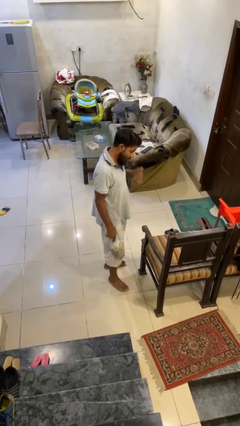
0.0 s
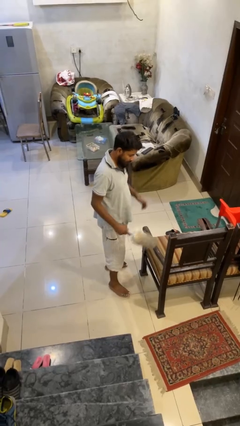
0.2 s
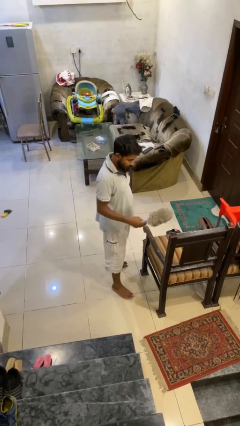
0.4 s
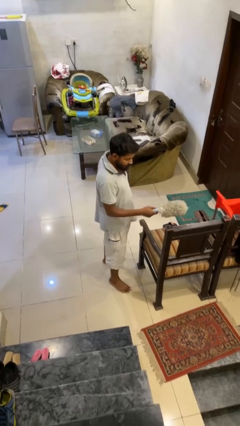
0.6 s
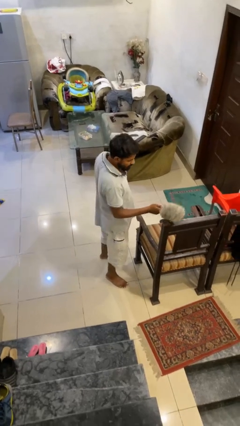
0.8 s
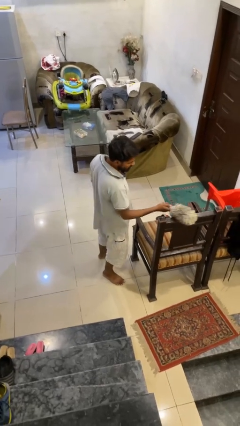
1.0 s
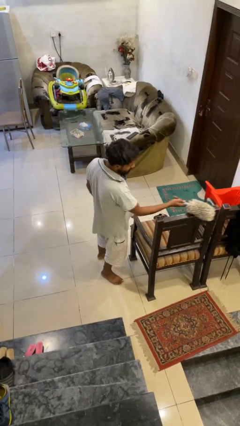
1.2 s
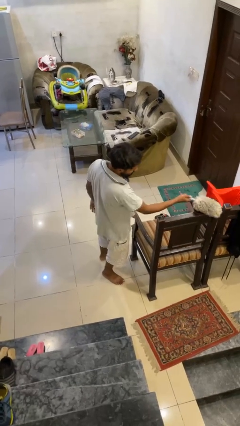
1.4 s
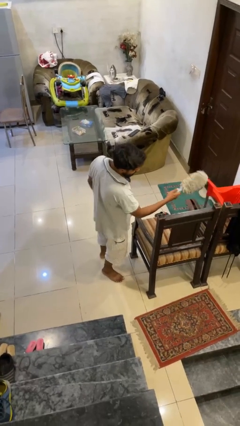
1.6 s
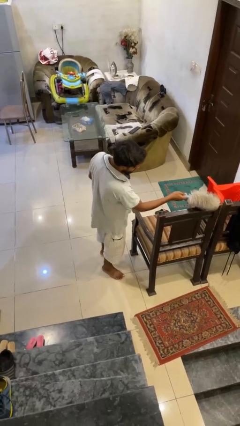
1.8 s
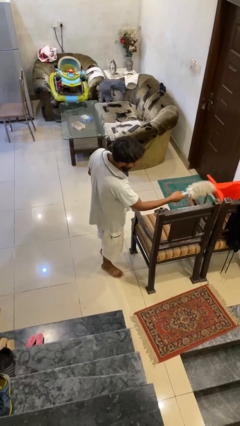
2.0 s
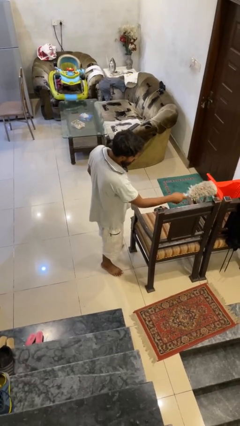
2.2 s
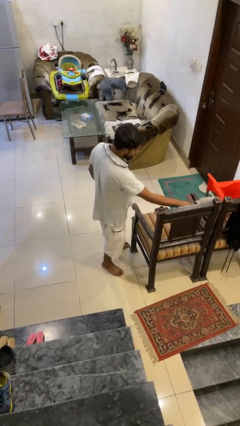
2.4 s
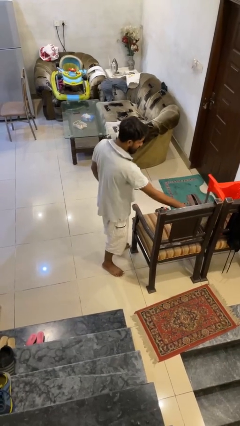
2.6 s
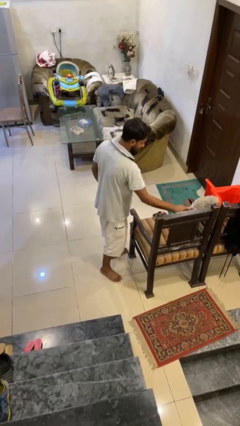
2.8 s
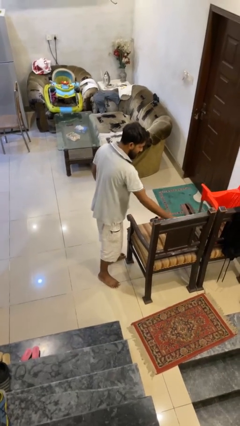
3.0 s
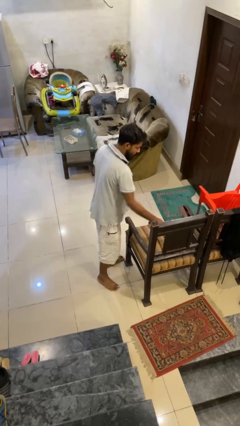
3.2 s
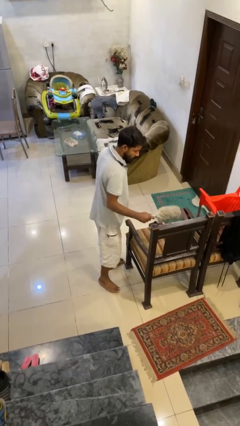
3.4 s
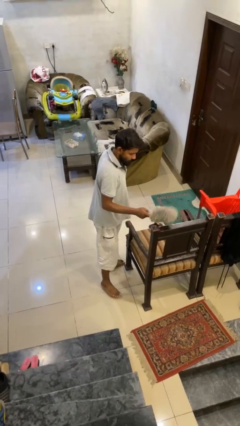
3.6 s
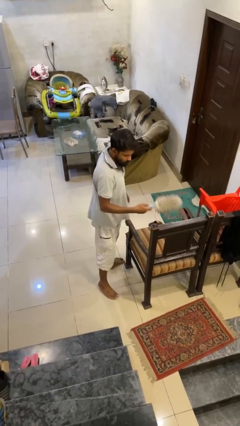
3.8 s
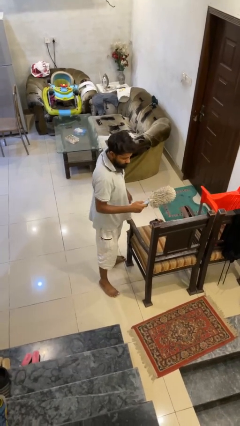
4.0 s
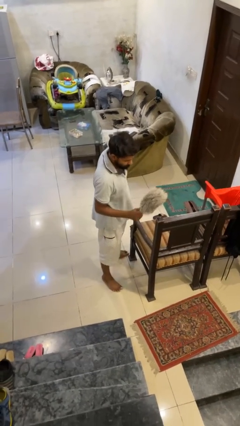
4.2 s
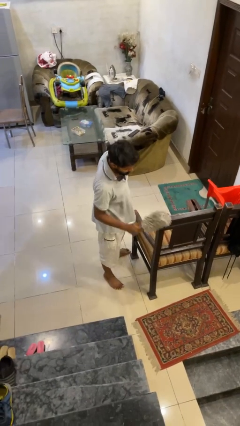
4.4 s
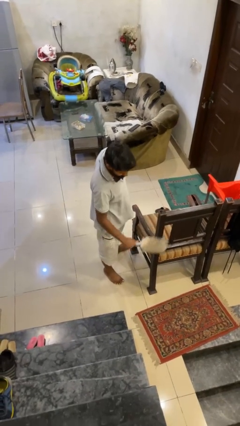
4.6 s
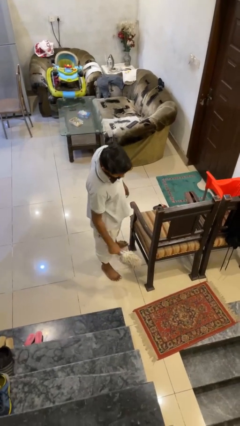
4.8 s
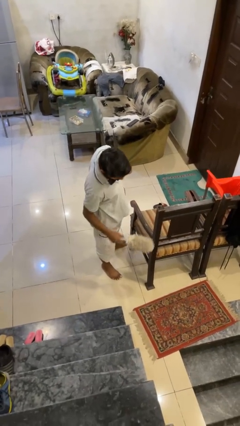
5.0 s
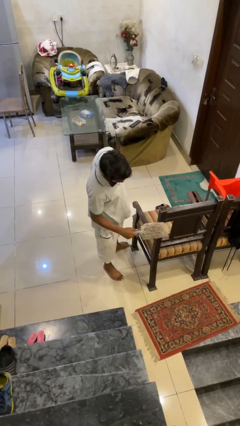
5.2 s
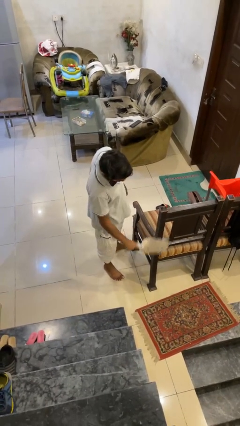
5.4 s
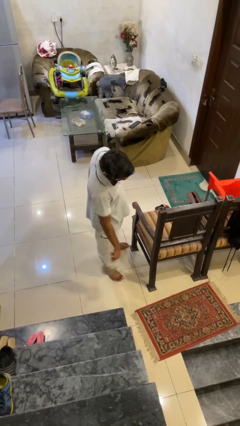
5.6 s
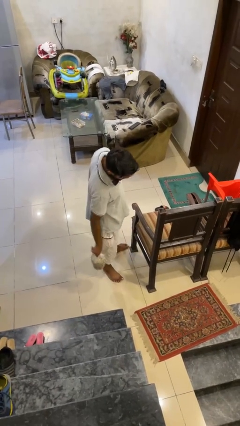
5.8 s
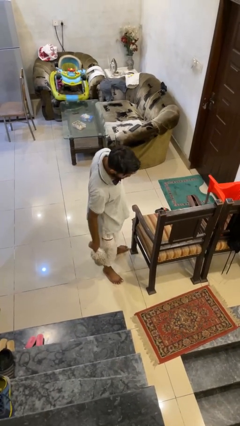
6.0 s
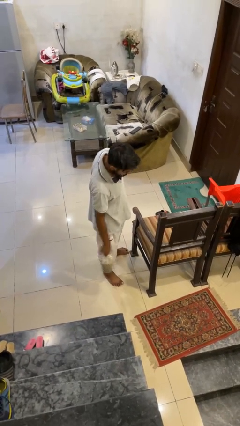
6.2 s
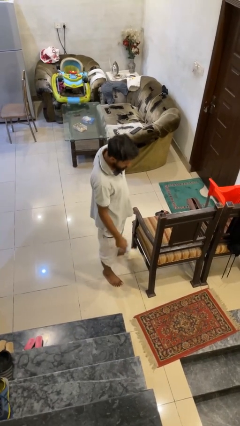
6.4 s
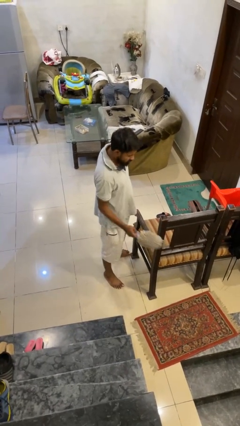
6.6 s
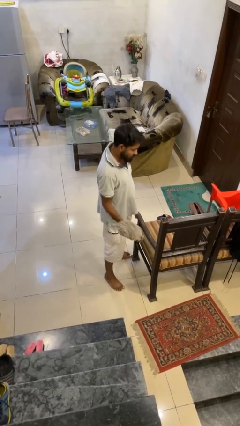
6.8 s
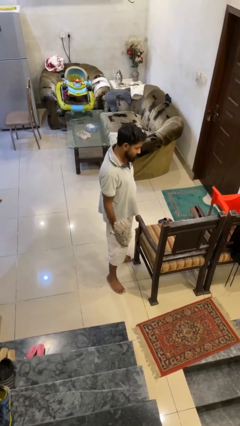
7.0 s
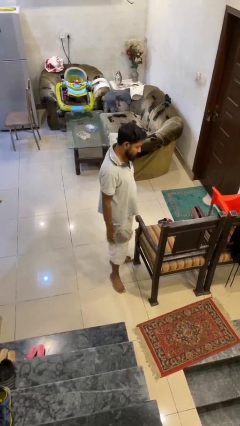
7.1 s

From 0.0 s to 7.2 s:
person dusts furniture

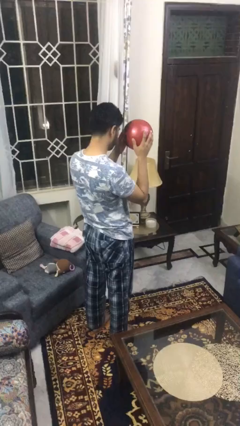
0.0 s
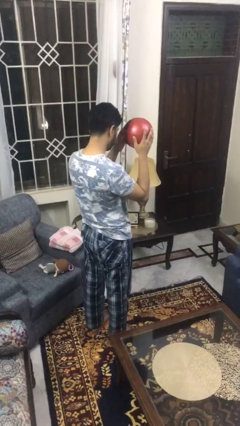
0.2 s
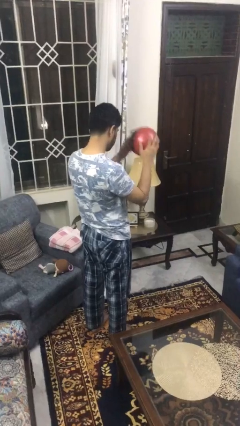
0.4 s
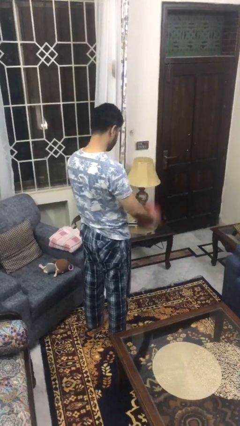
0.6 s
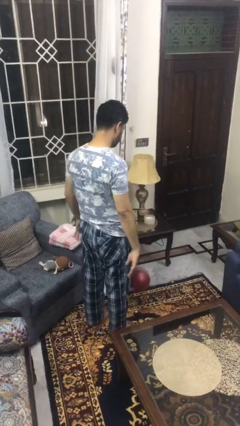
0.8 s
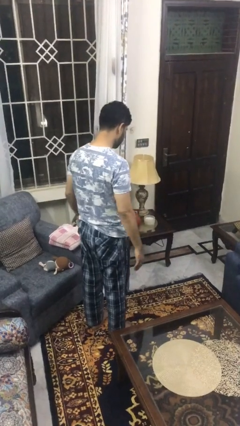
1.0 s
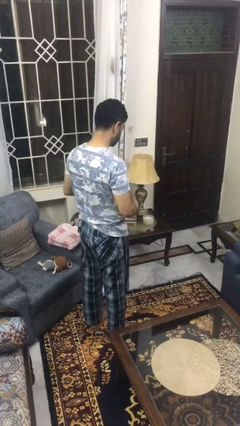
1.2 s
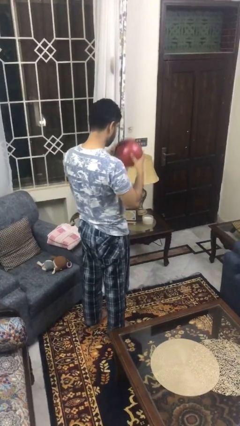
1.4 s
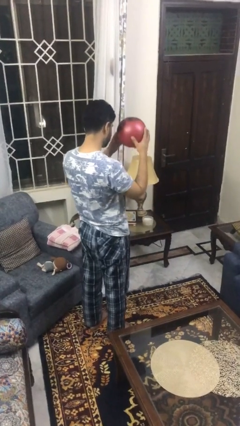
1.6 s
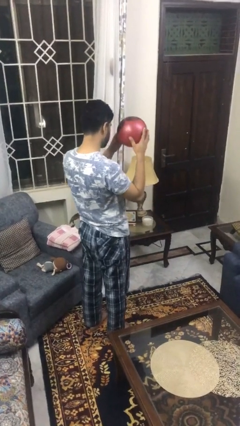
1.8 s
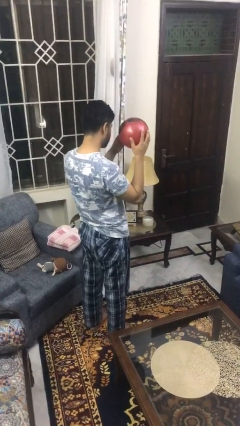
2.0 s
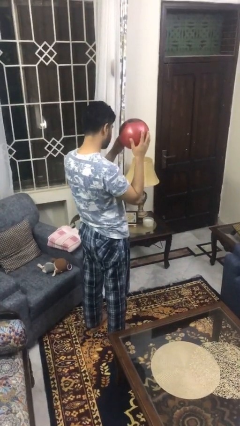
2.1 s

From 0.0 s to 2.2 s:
person bounces ball on floor

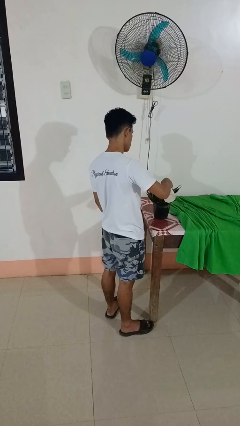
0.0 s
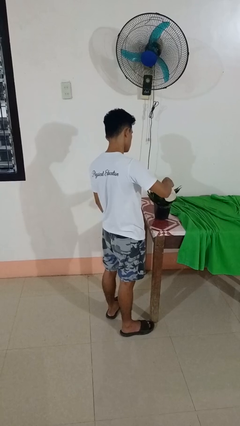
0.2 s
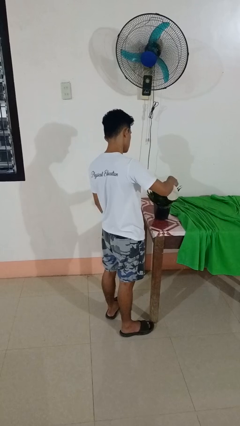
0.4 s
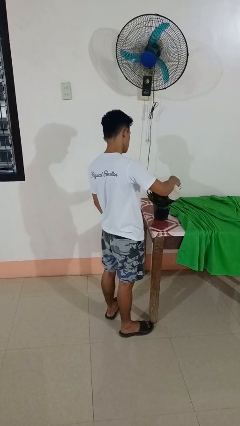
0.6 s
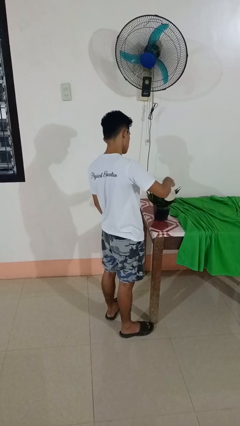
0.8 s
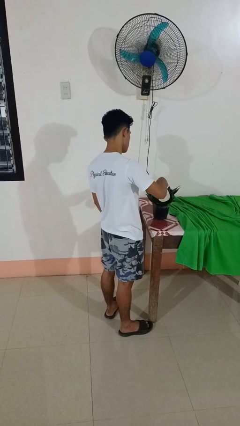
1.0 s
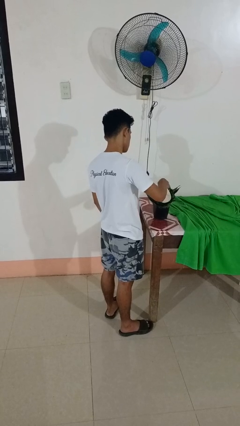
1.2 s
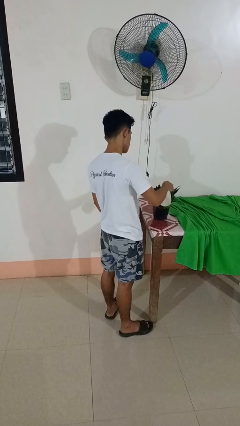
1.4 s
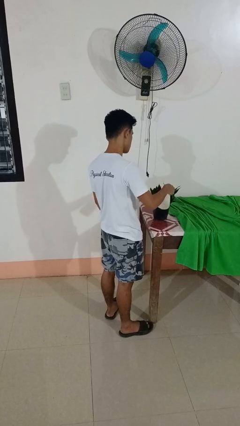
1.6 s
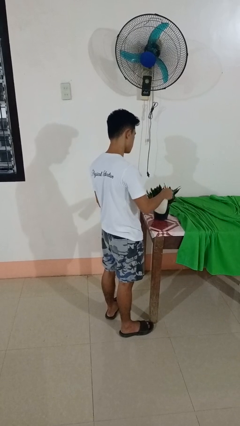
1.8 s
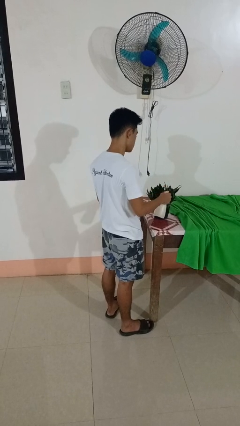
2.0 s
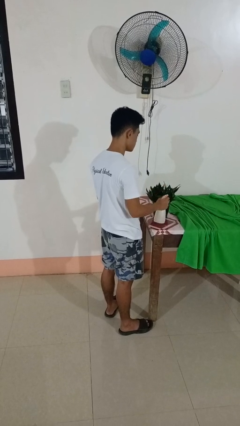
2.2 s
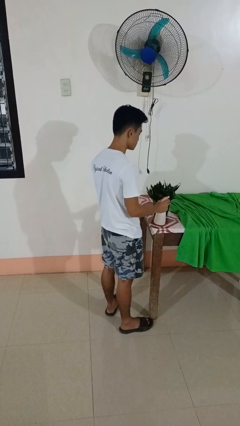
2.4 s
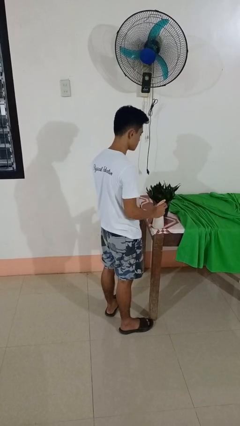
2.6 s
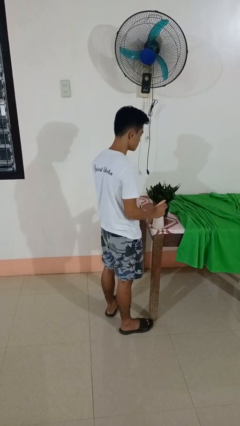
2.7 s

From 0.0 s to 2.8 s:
person waters houseplant

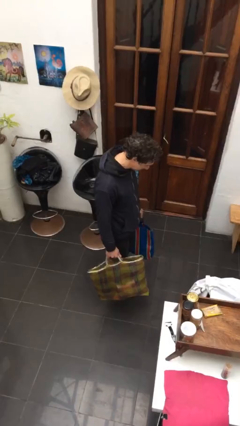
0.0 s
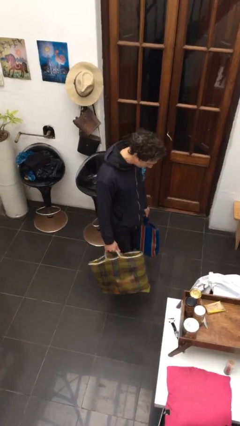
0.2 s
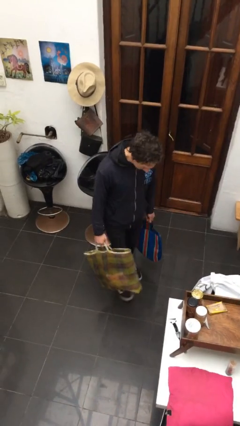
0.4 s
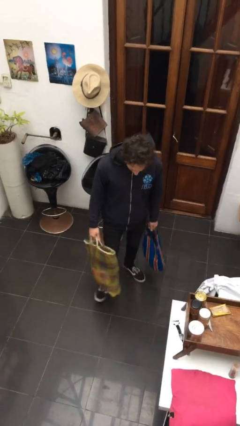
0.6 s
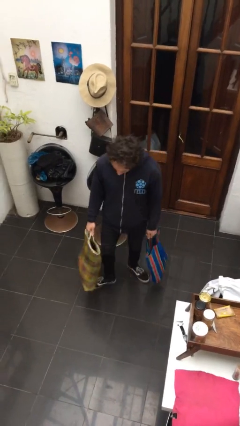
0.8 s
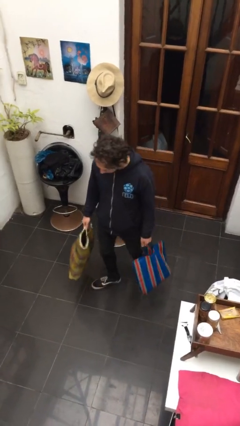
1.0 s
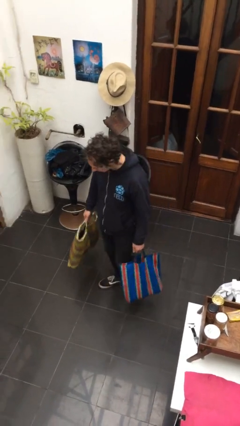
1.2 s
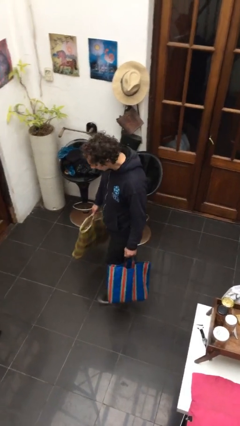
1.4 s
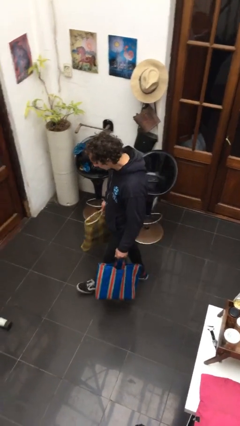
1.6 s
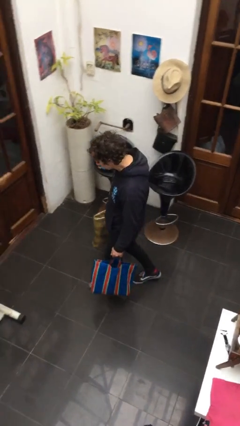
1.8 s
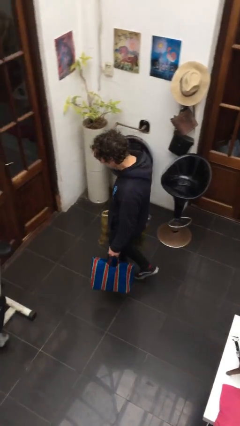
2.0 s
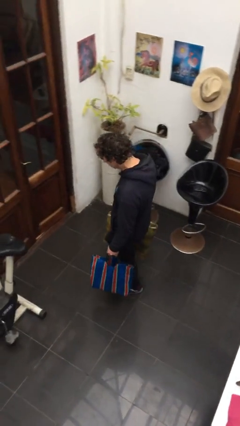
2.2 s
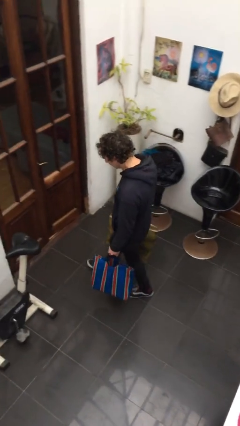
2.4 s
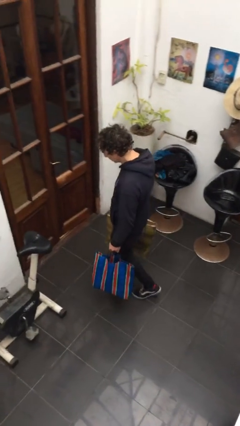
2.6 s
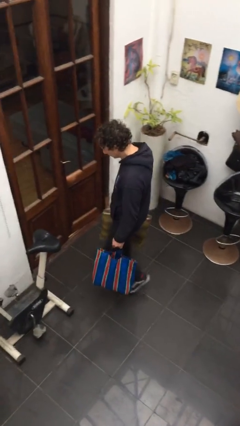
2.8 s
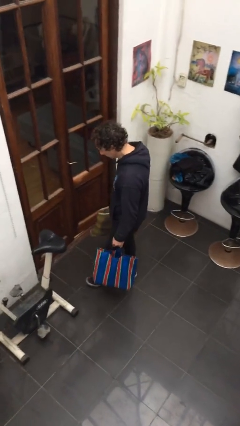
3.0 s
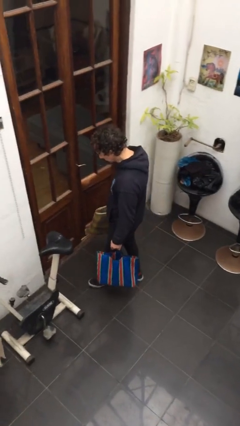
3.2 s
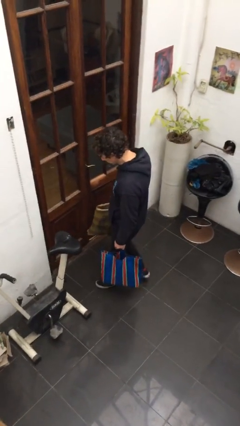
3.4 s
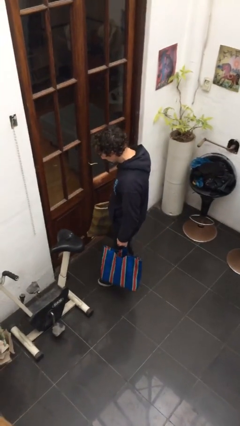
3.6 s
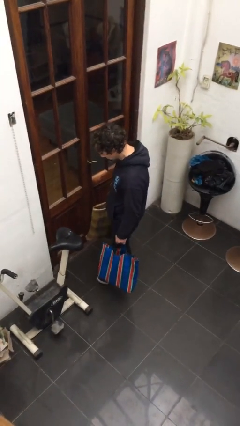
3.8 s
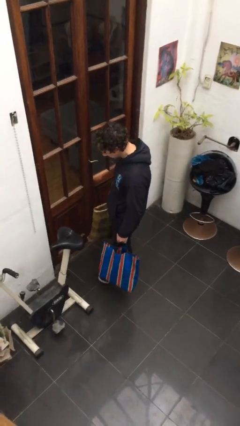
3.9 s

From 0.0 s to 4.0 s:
person carries groceries

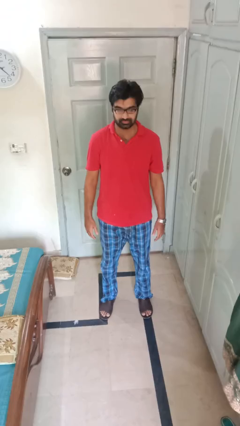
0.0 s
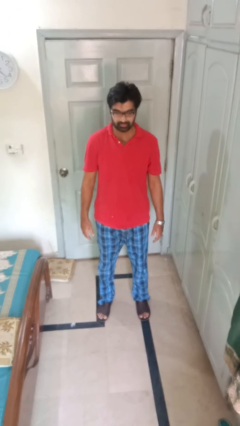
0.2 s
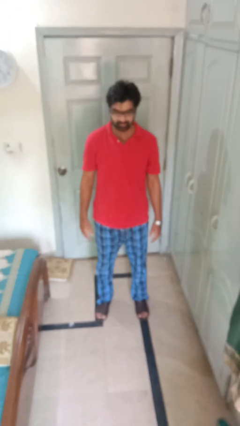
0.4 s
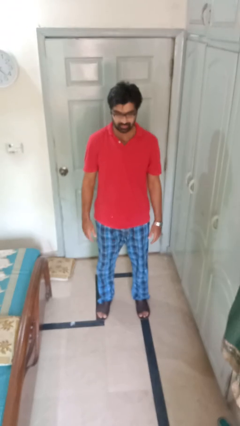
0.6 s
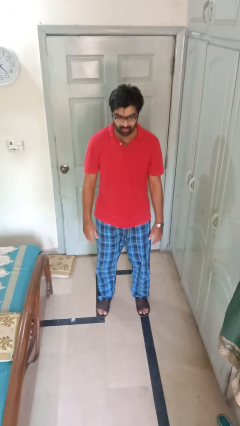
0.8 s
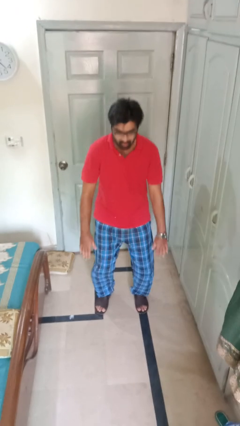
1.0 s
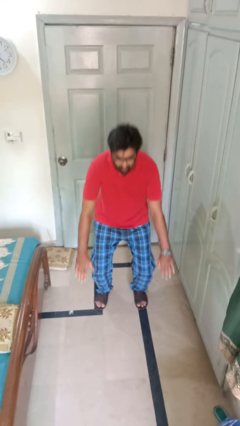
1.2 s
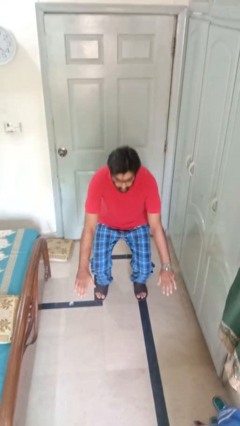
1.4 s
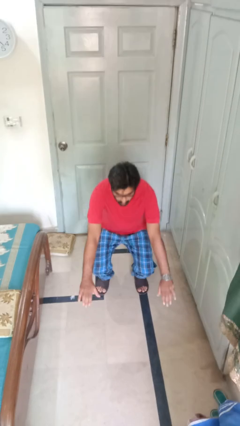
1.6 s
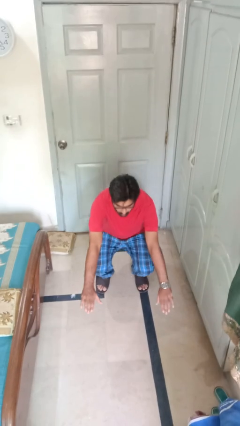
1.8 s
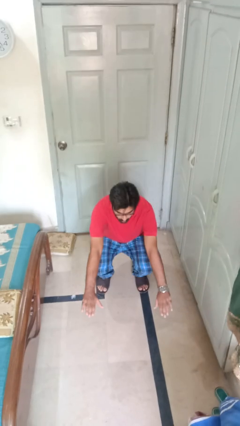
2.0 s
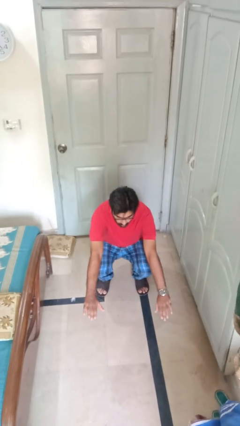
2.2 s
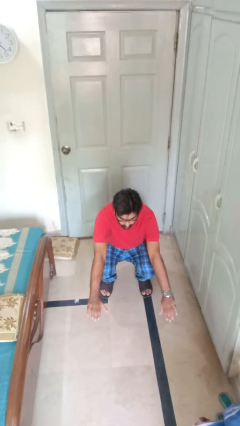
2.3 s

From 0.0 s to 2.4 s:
person squats
